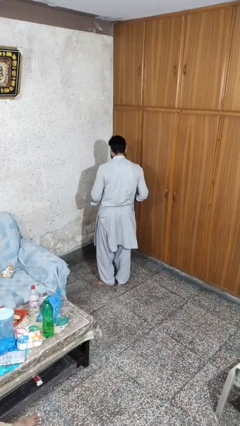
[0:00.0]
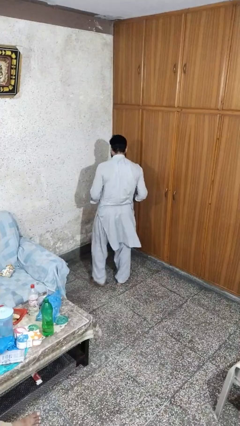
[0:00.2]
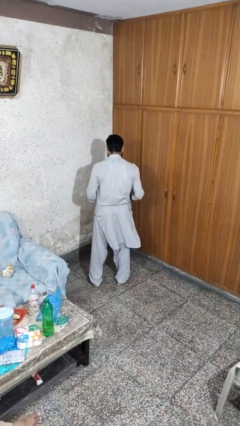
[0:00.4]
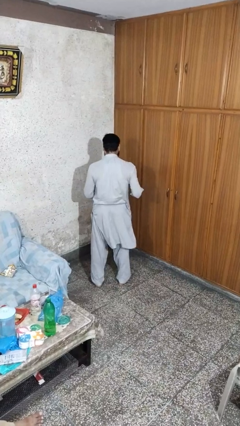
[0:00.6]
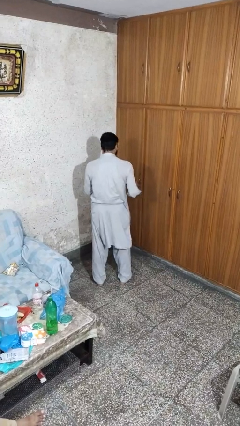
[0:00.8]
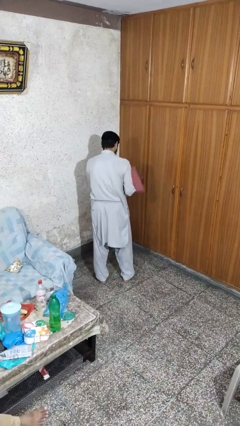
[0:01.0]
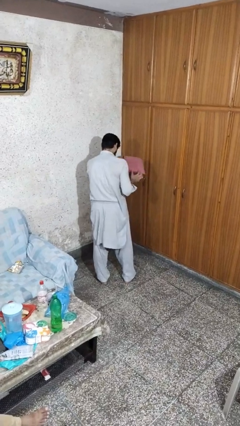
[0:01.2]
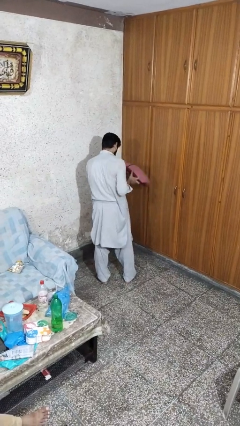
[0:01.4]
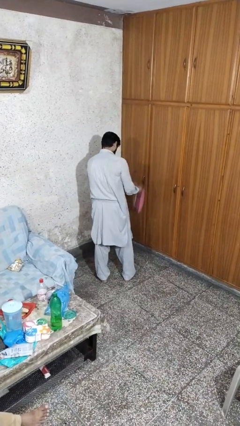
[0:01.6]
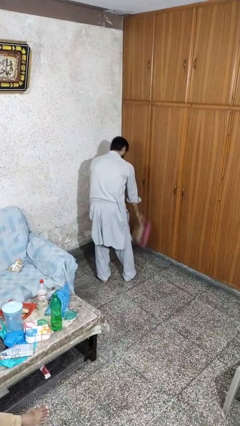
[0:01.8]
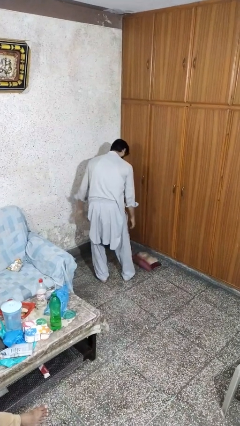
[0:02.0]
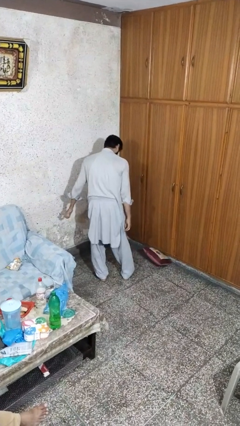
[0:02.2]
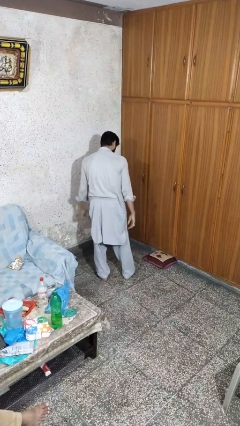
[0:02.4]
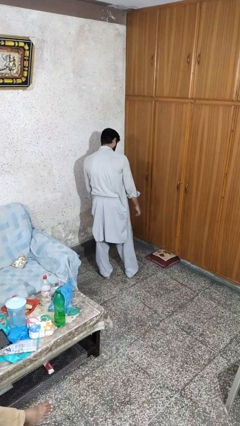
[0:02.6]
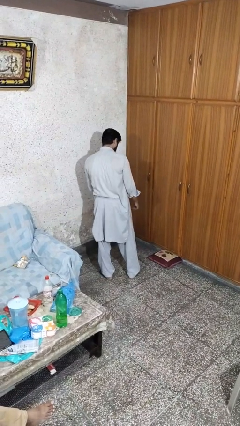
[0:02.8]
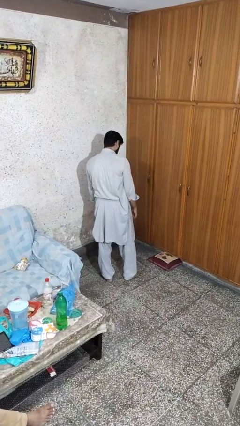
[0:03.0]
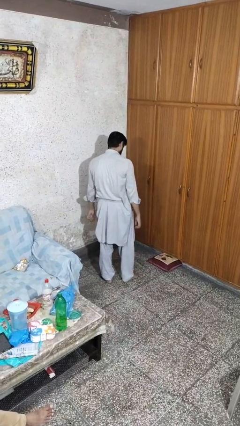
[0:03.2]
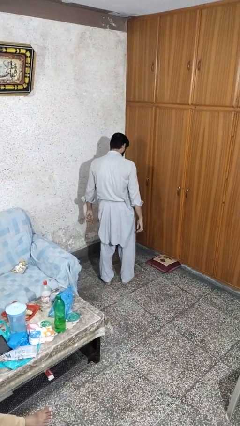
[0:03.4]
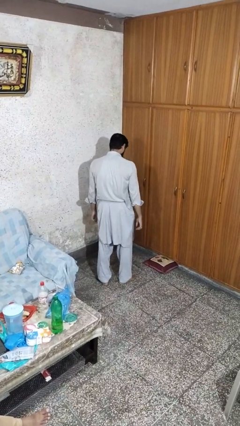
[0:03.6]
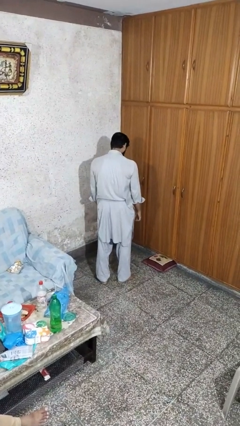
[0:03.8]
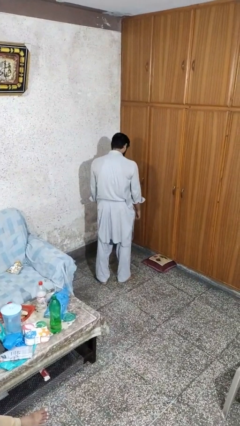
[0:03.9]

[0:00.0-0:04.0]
person drops object

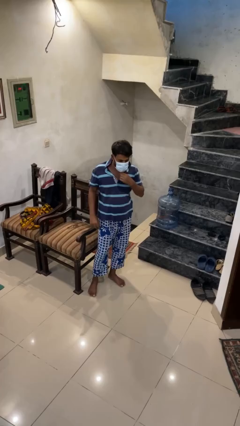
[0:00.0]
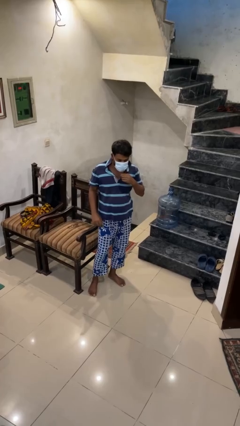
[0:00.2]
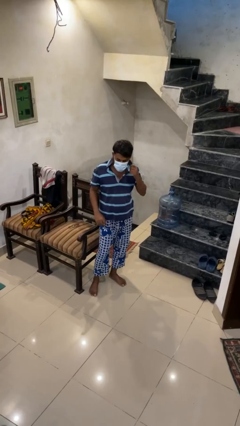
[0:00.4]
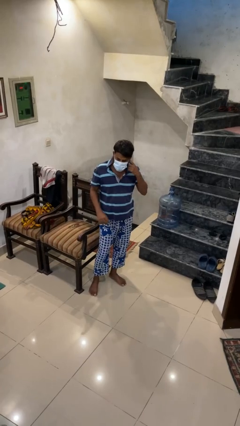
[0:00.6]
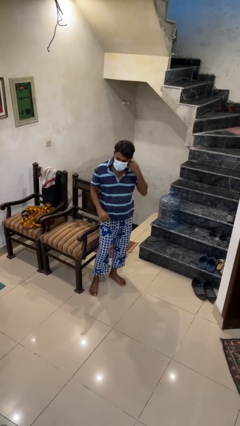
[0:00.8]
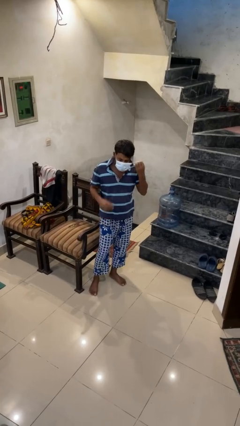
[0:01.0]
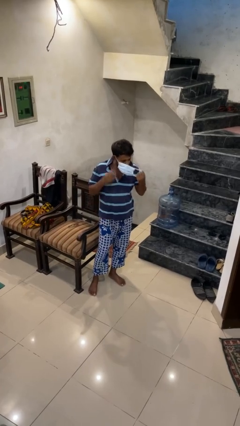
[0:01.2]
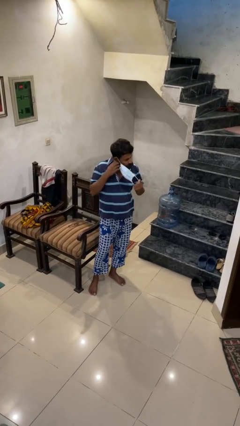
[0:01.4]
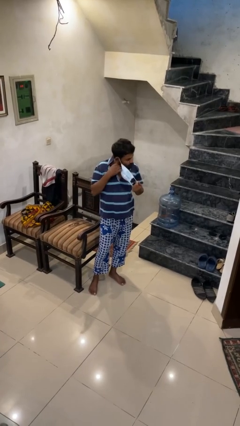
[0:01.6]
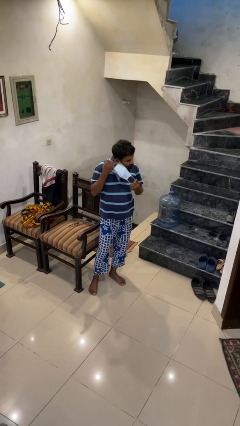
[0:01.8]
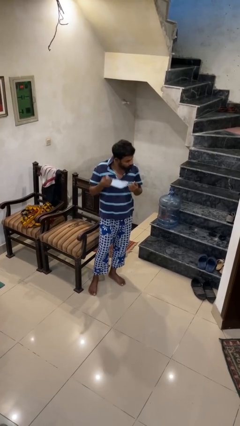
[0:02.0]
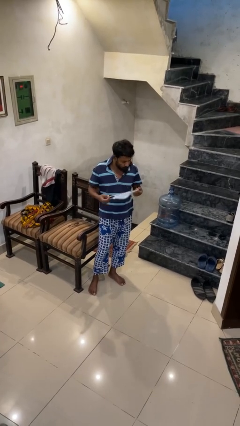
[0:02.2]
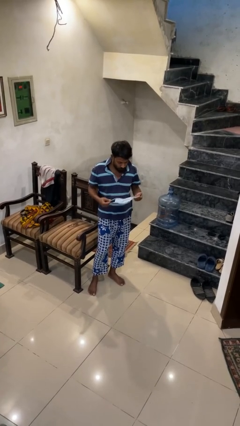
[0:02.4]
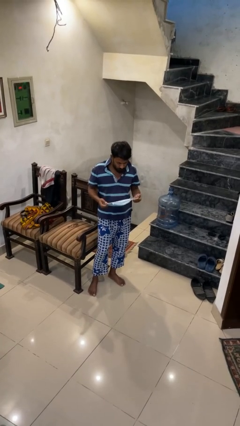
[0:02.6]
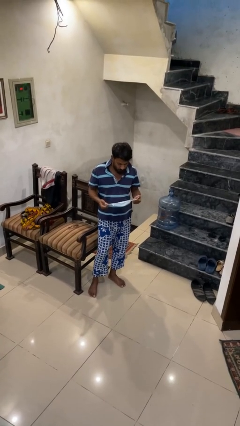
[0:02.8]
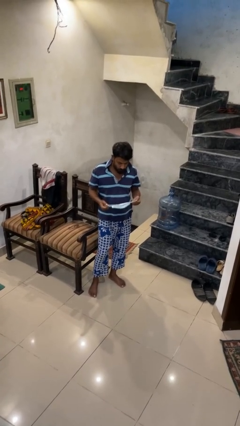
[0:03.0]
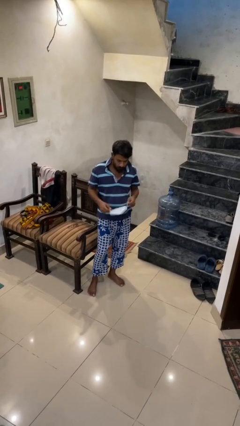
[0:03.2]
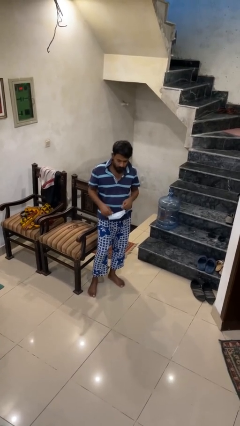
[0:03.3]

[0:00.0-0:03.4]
person takes off facemask

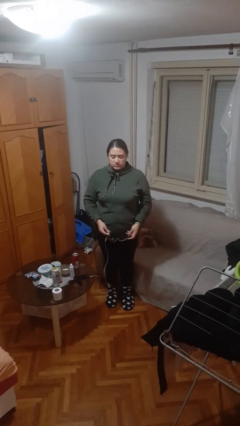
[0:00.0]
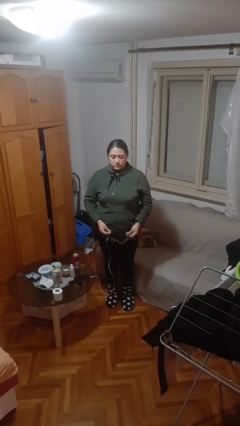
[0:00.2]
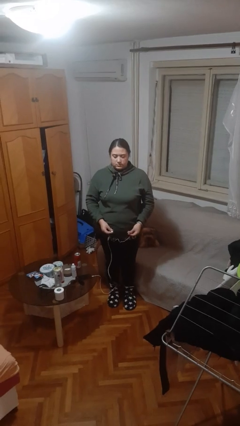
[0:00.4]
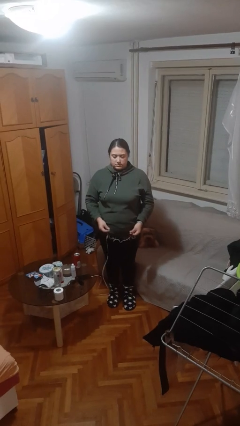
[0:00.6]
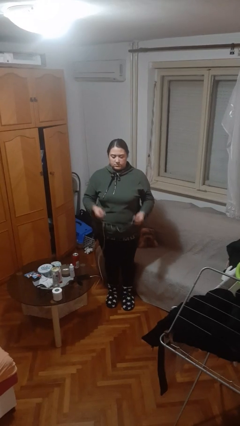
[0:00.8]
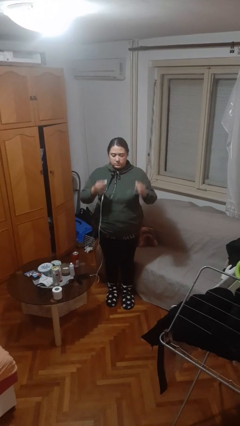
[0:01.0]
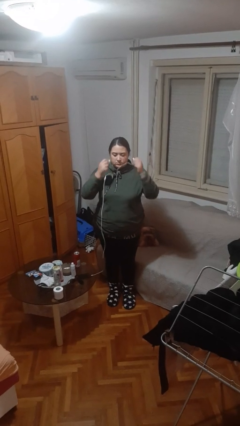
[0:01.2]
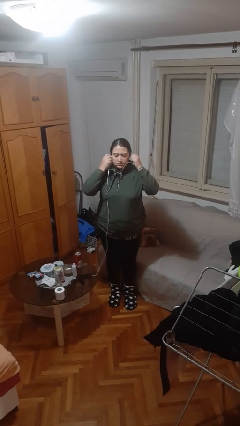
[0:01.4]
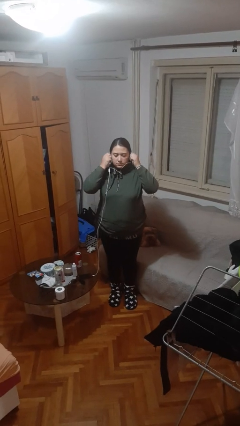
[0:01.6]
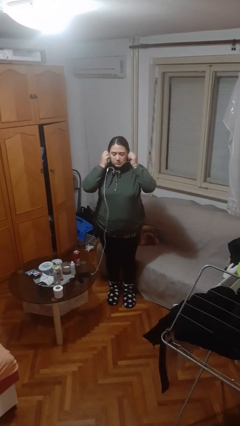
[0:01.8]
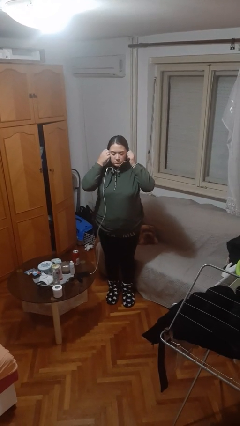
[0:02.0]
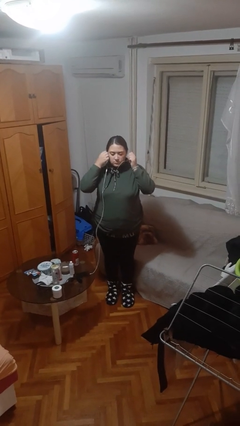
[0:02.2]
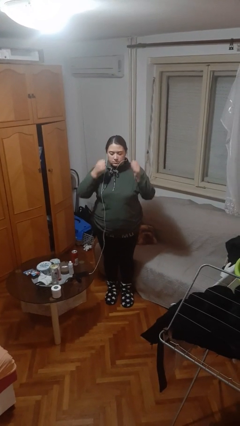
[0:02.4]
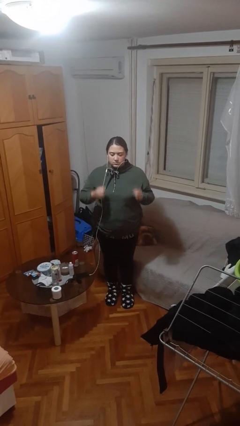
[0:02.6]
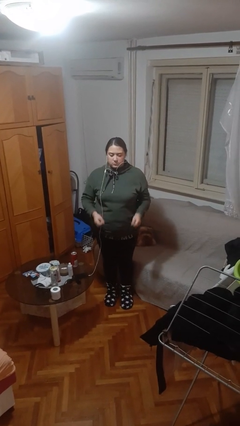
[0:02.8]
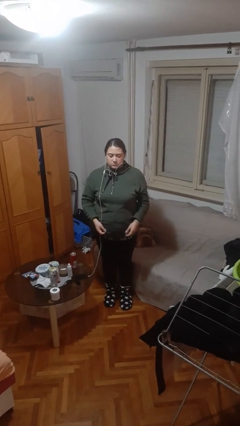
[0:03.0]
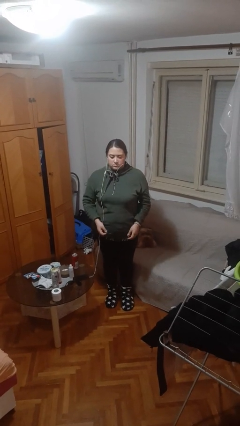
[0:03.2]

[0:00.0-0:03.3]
person puts on headphones

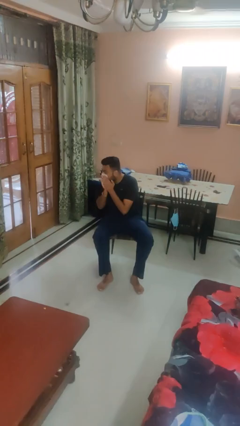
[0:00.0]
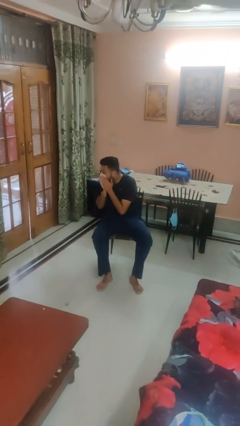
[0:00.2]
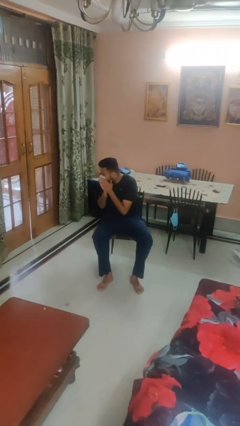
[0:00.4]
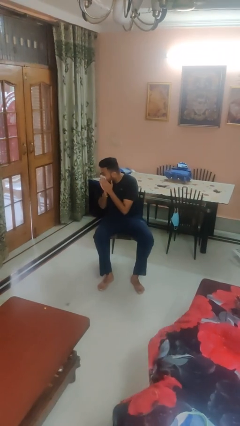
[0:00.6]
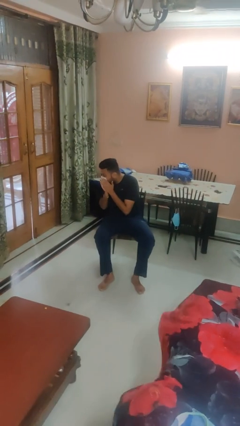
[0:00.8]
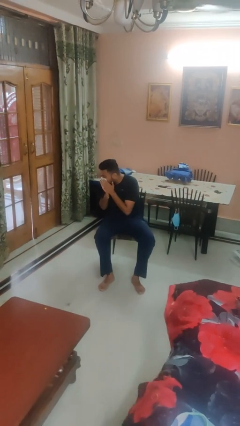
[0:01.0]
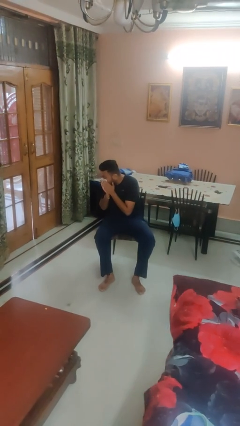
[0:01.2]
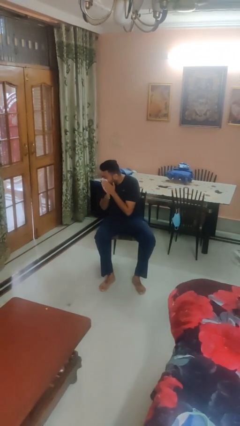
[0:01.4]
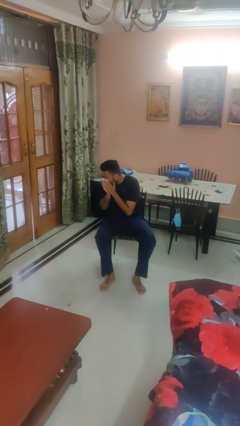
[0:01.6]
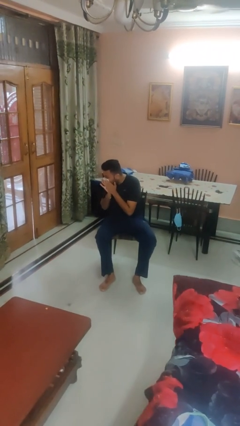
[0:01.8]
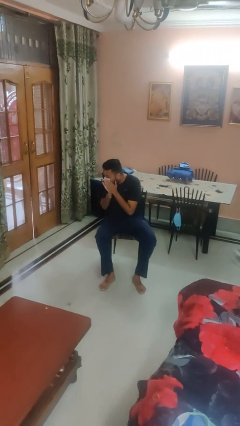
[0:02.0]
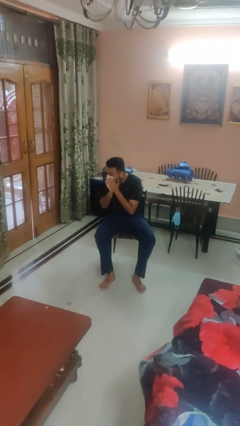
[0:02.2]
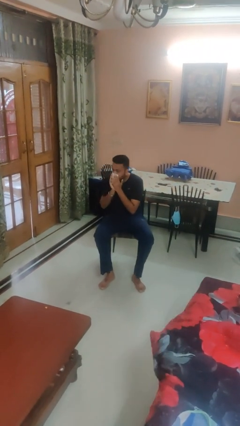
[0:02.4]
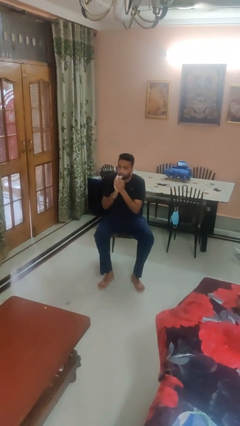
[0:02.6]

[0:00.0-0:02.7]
person blows nose

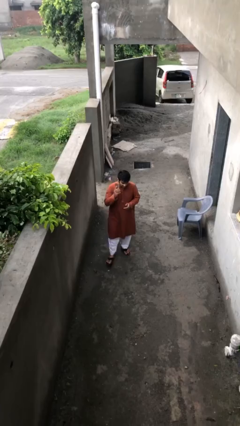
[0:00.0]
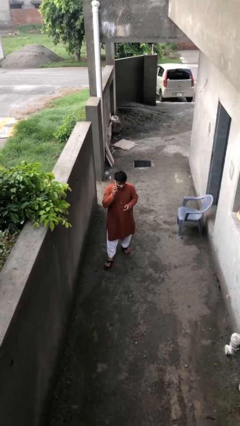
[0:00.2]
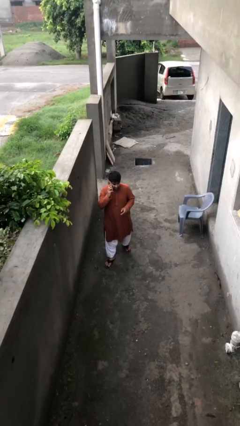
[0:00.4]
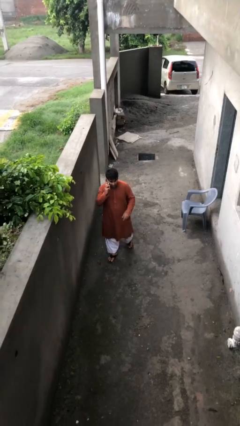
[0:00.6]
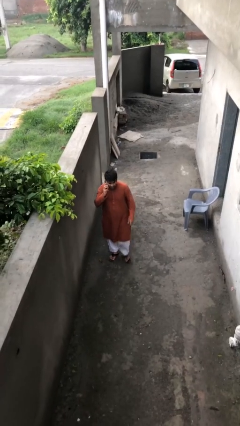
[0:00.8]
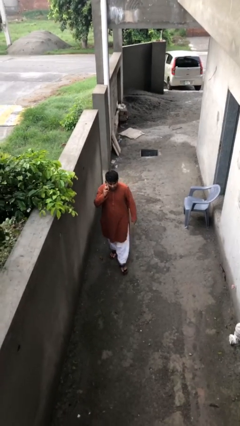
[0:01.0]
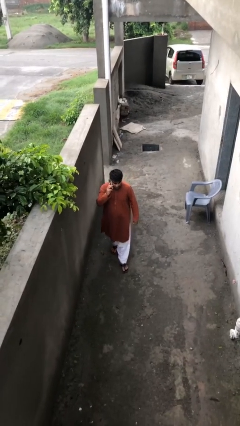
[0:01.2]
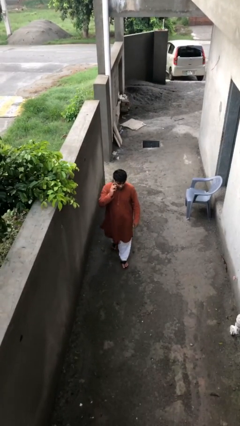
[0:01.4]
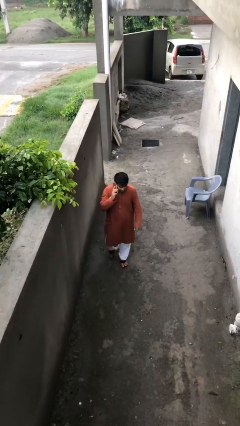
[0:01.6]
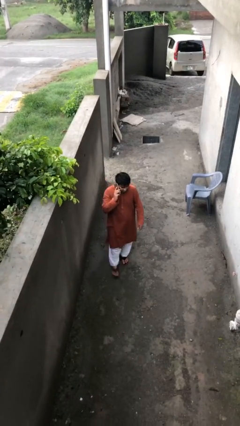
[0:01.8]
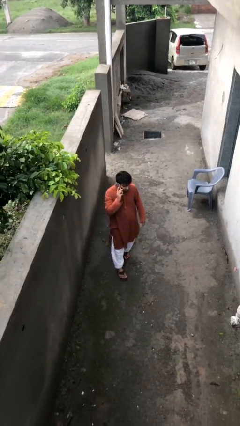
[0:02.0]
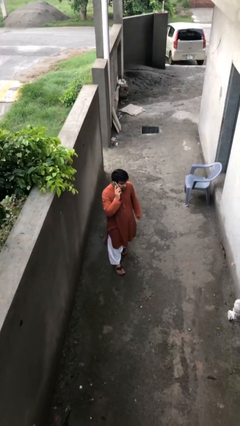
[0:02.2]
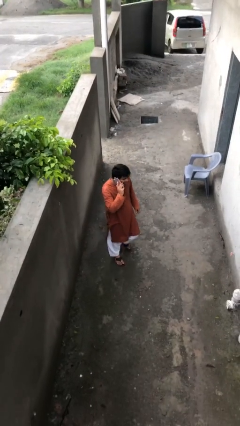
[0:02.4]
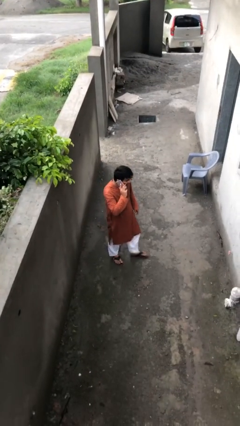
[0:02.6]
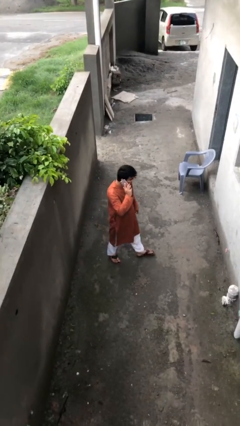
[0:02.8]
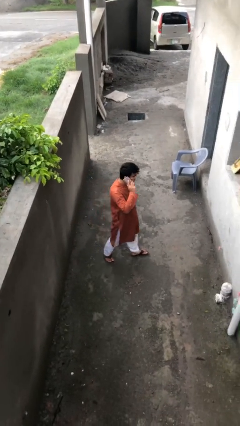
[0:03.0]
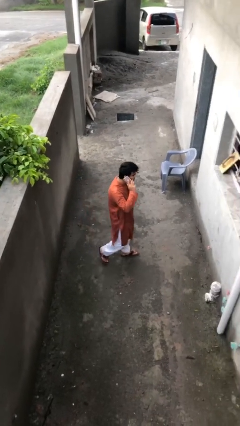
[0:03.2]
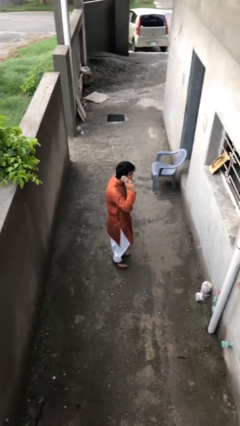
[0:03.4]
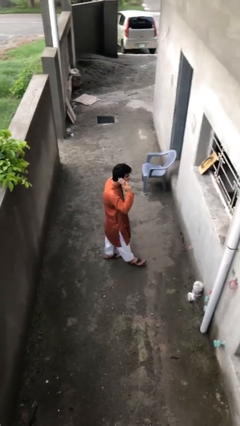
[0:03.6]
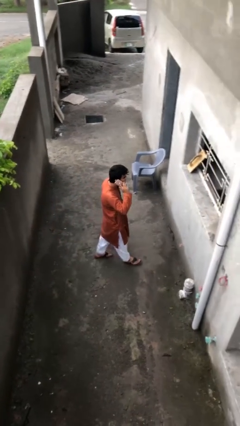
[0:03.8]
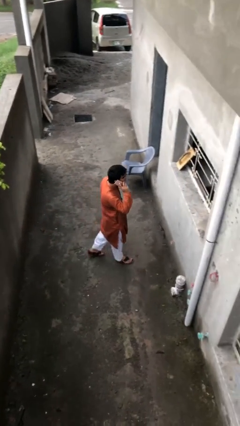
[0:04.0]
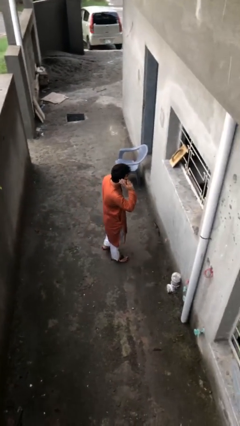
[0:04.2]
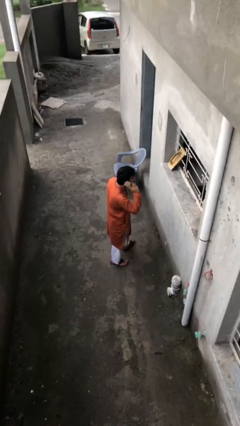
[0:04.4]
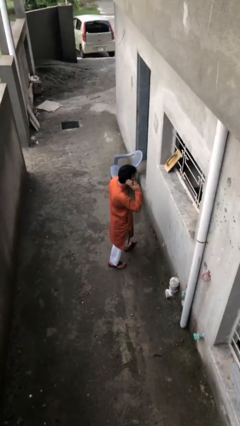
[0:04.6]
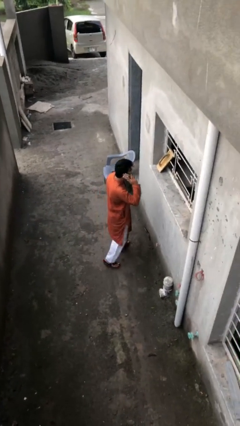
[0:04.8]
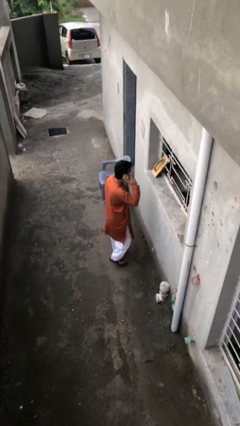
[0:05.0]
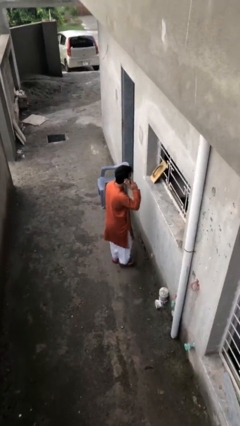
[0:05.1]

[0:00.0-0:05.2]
person talks on phone
